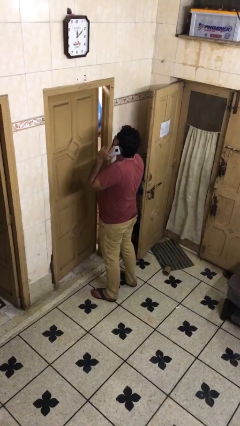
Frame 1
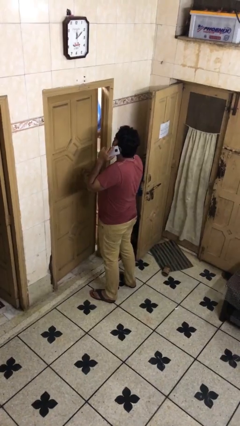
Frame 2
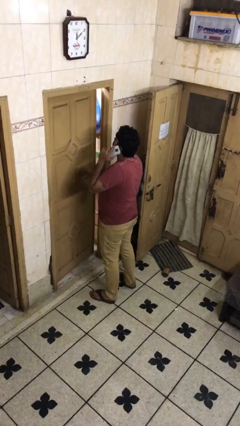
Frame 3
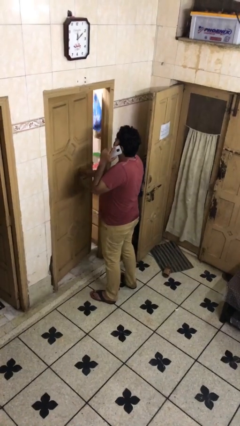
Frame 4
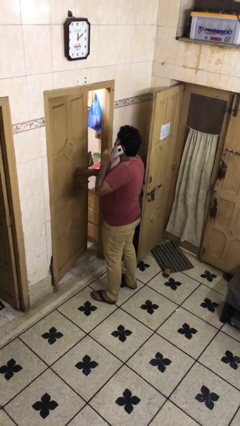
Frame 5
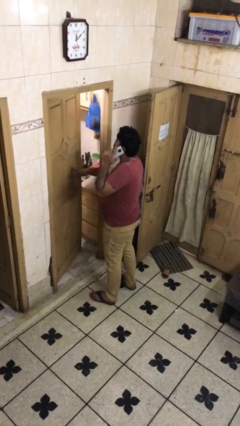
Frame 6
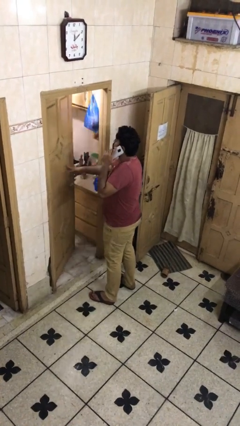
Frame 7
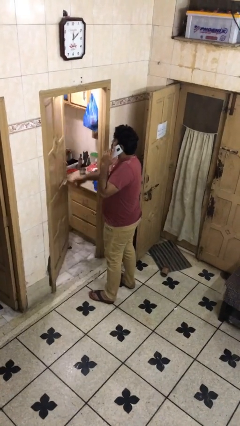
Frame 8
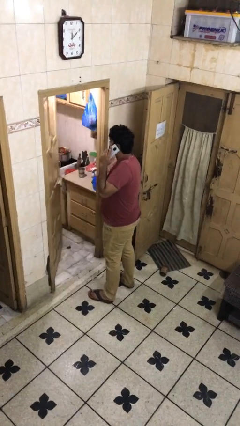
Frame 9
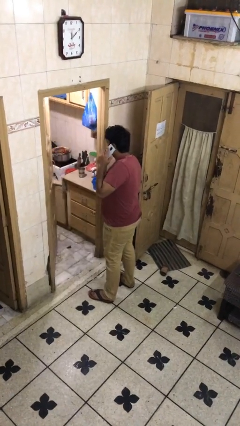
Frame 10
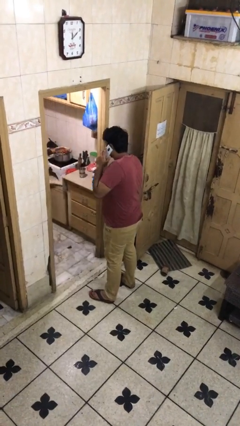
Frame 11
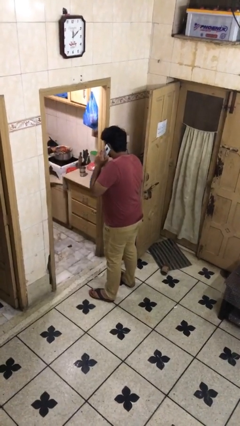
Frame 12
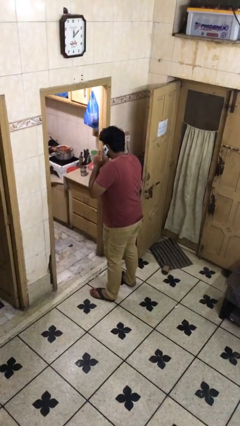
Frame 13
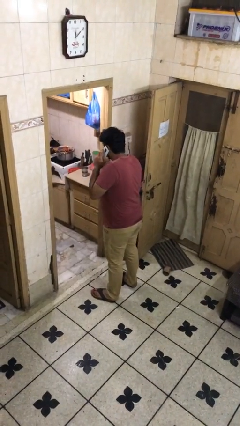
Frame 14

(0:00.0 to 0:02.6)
person opens facility door

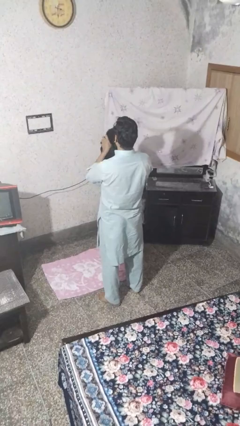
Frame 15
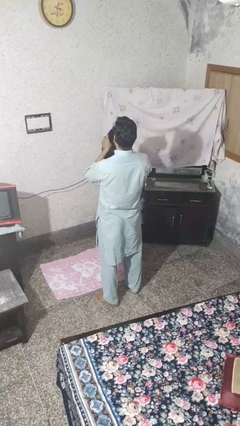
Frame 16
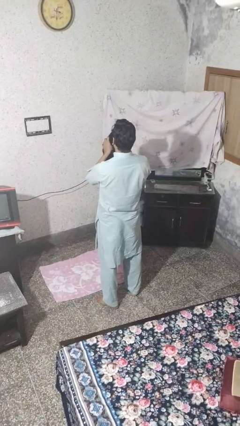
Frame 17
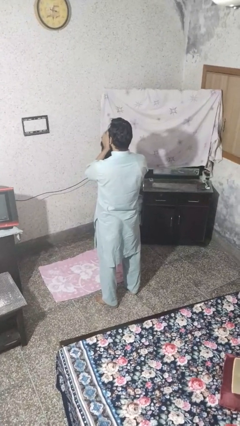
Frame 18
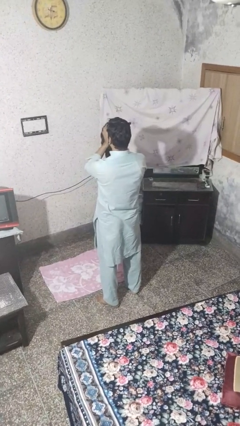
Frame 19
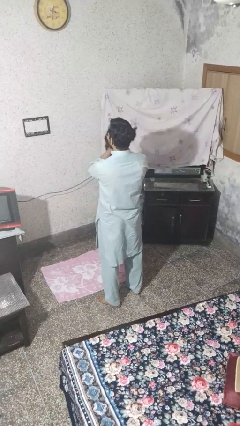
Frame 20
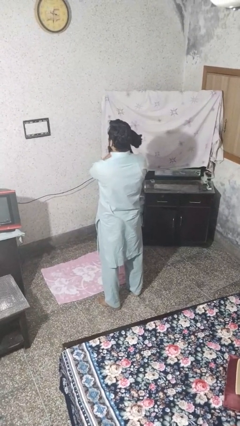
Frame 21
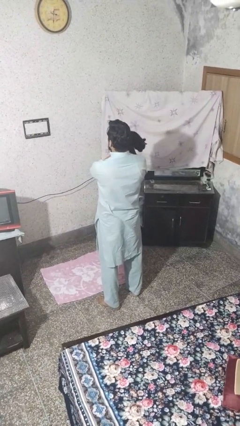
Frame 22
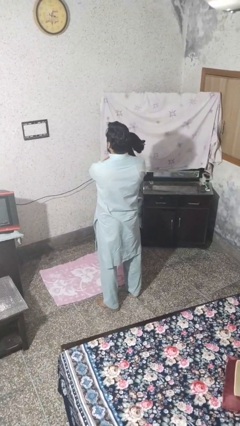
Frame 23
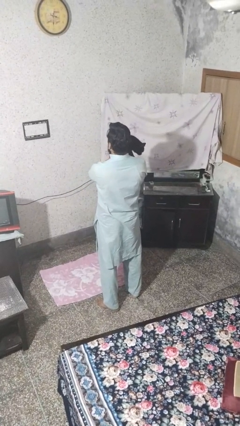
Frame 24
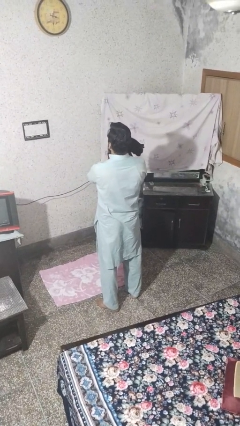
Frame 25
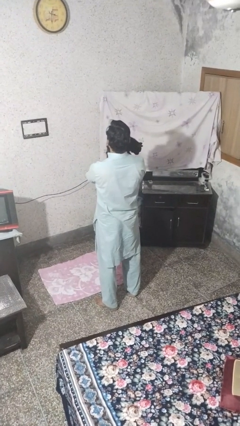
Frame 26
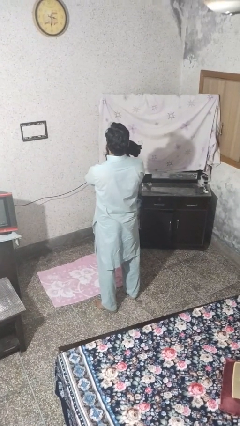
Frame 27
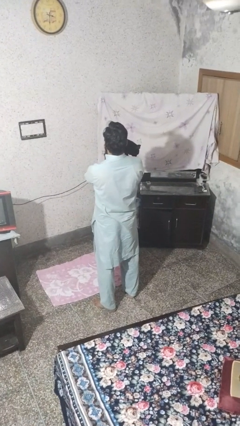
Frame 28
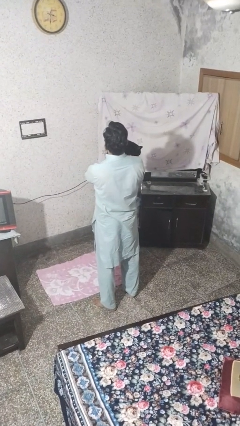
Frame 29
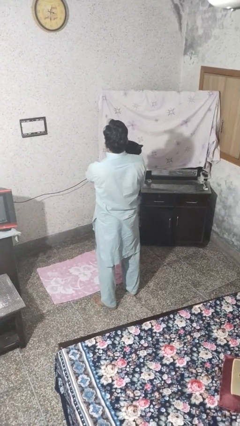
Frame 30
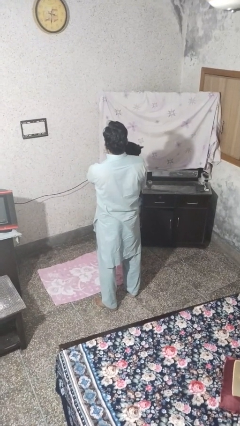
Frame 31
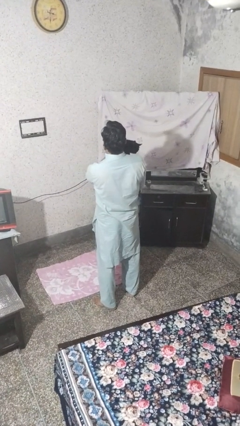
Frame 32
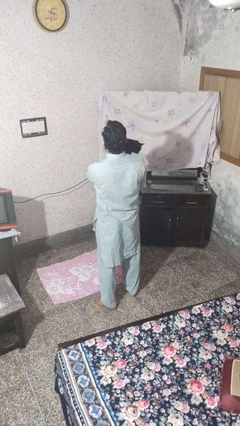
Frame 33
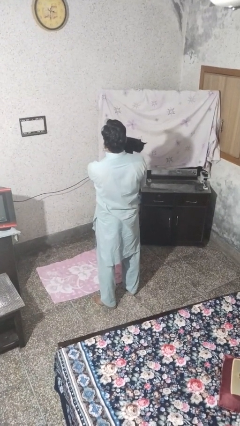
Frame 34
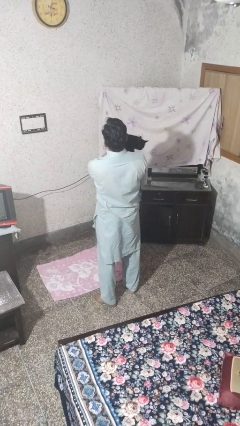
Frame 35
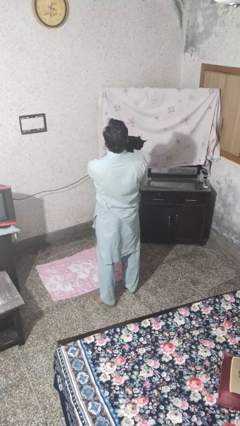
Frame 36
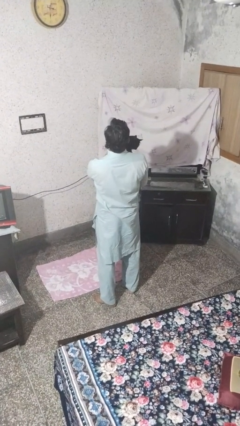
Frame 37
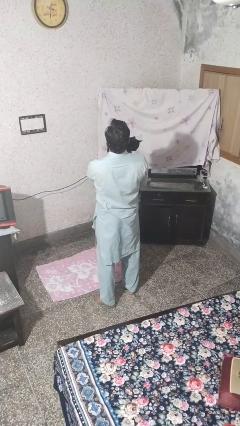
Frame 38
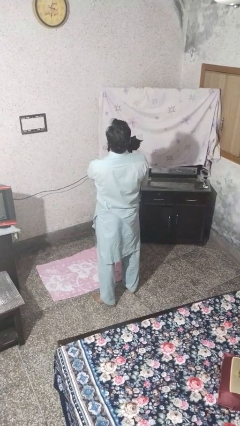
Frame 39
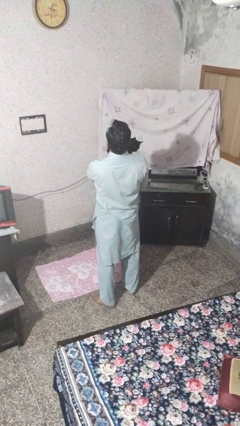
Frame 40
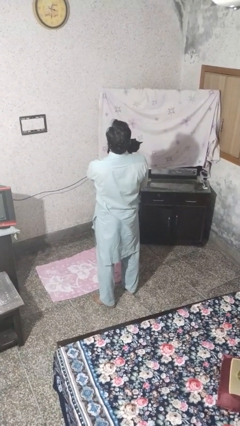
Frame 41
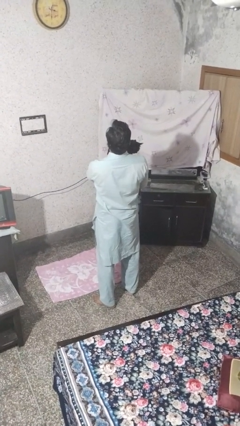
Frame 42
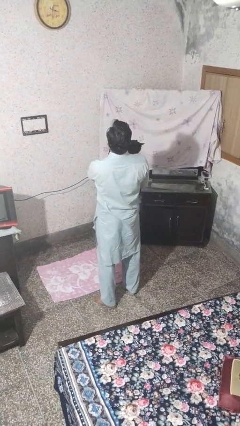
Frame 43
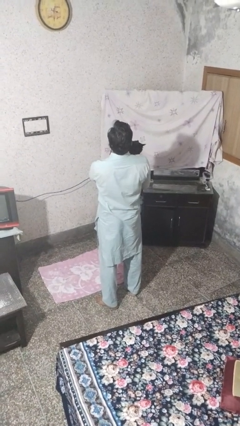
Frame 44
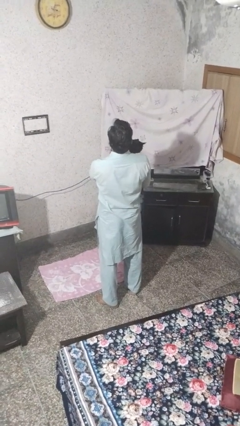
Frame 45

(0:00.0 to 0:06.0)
person hugs cat

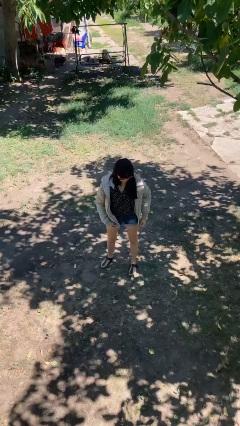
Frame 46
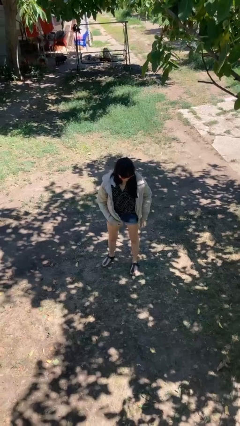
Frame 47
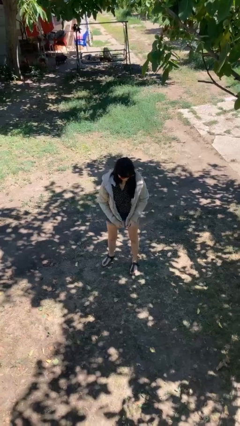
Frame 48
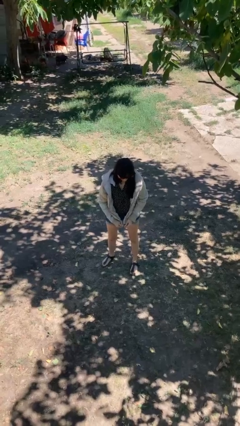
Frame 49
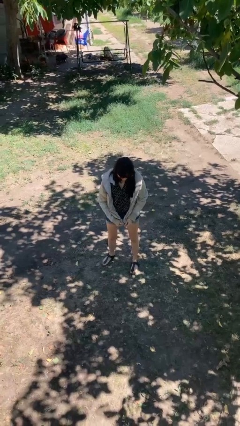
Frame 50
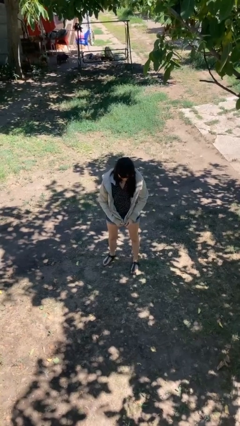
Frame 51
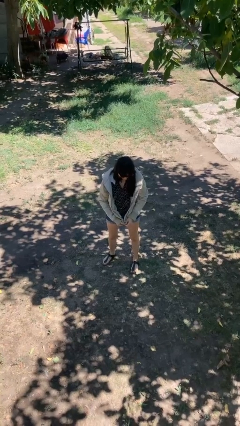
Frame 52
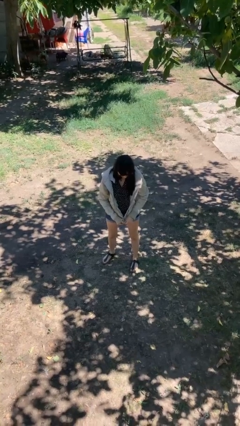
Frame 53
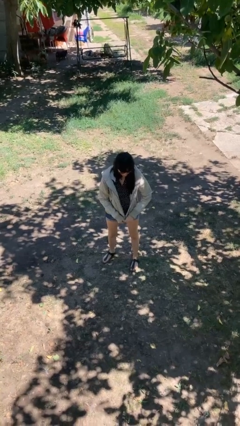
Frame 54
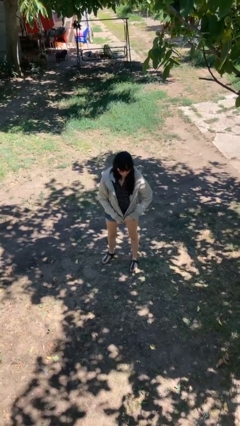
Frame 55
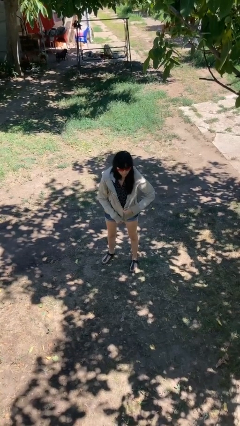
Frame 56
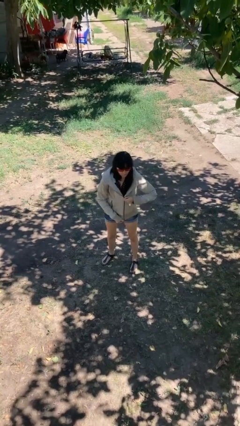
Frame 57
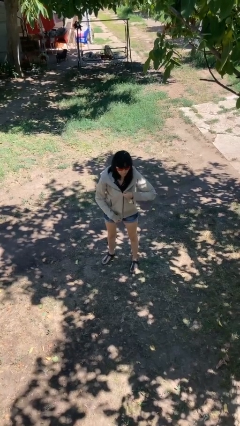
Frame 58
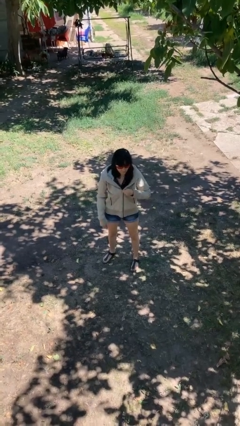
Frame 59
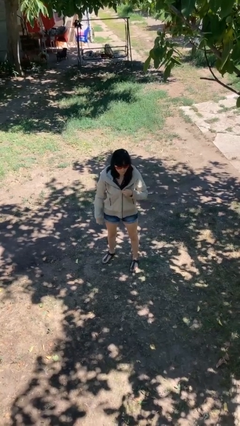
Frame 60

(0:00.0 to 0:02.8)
person zips up jacket

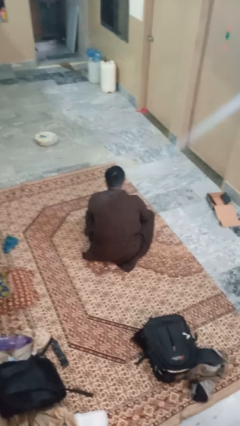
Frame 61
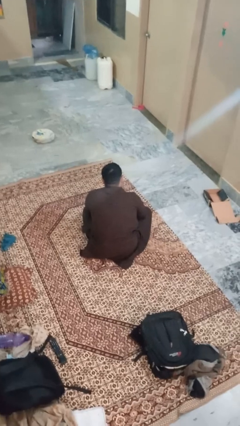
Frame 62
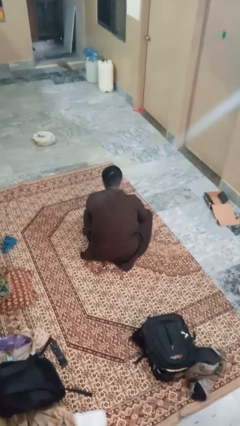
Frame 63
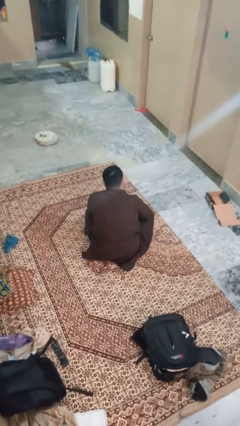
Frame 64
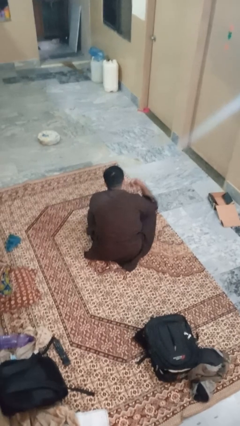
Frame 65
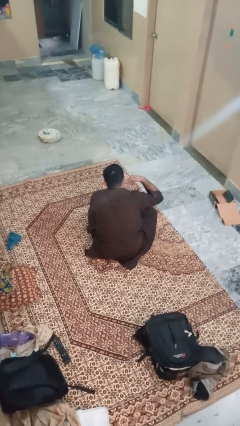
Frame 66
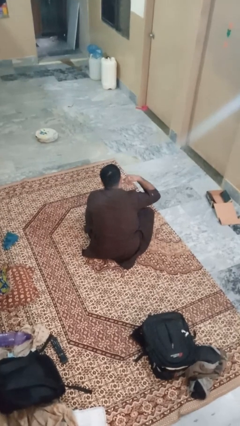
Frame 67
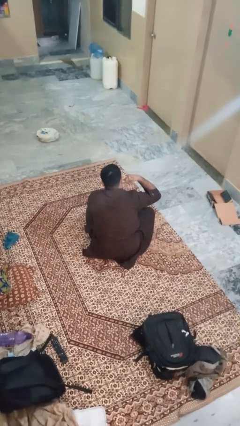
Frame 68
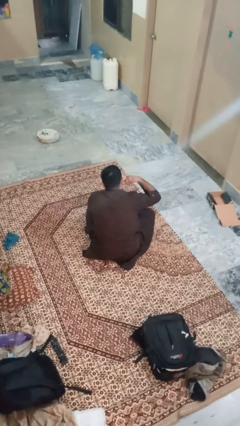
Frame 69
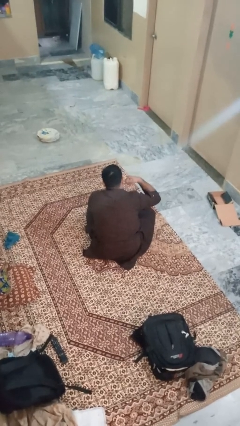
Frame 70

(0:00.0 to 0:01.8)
person gestures call me

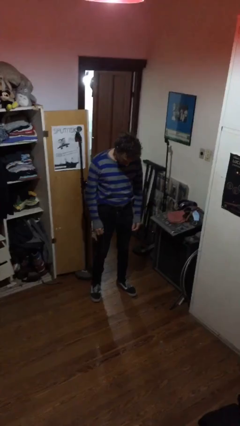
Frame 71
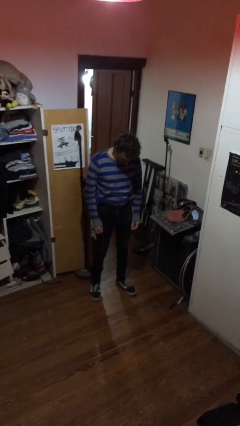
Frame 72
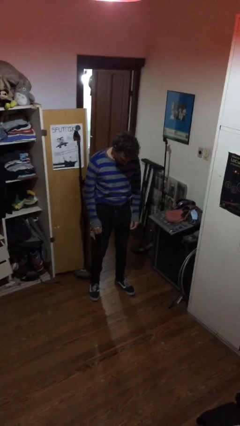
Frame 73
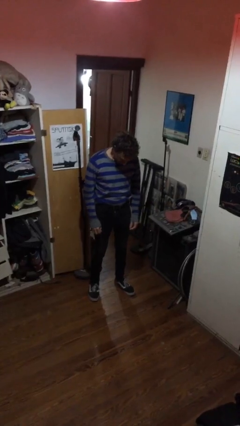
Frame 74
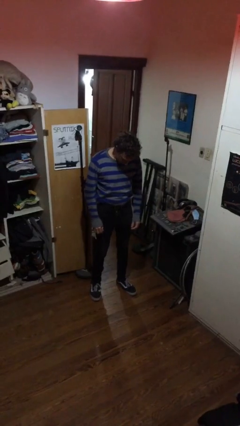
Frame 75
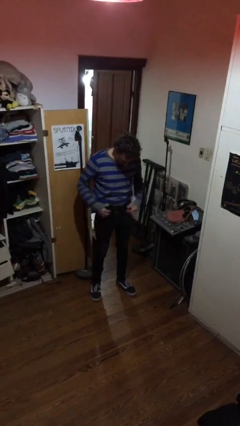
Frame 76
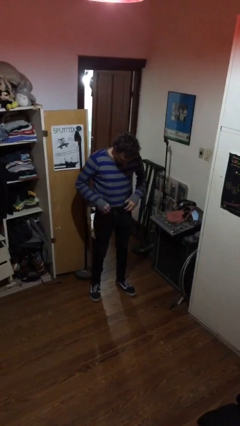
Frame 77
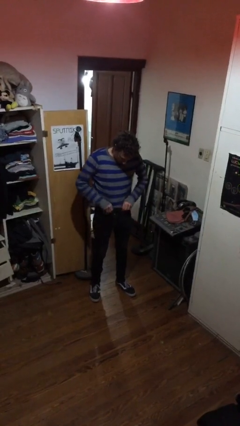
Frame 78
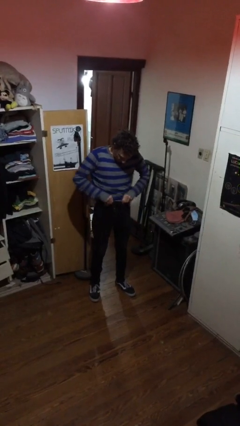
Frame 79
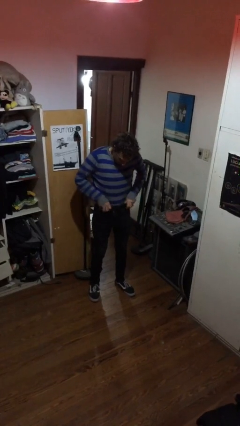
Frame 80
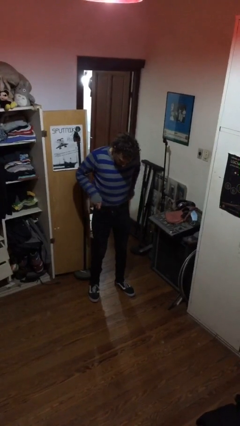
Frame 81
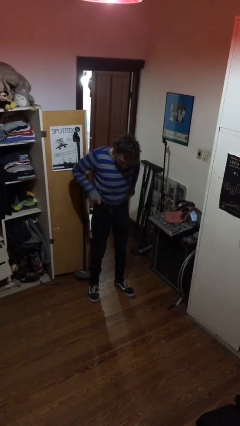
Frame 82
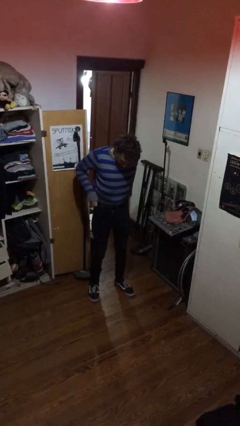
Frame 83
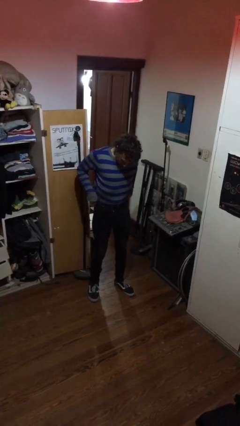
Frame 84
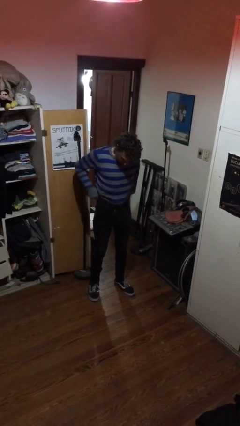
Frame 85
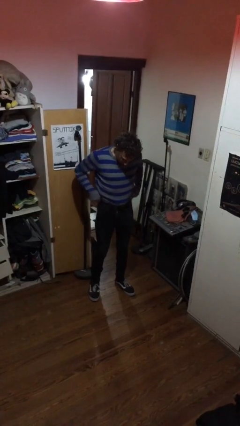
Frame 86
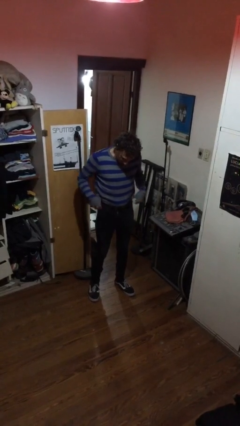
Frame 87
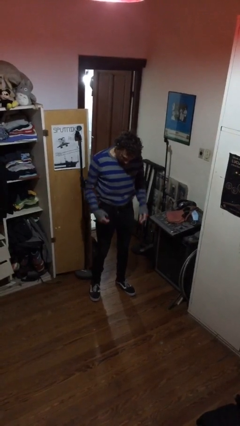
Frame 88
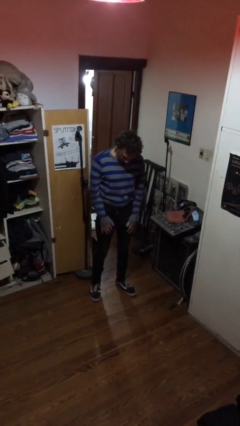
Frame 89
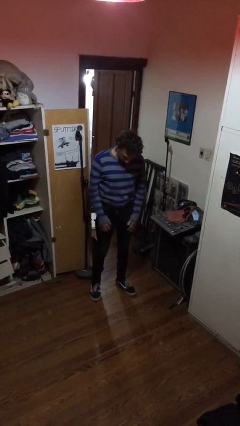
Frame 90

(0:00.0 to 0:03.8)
person hikes up pants

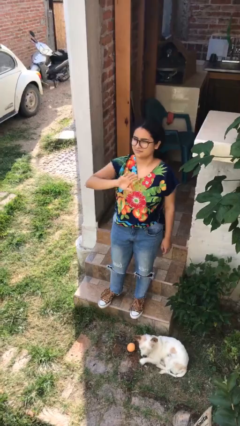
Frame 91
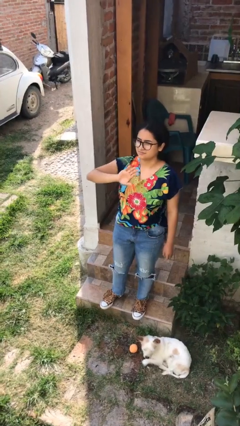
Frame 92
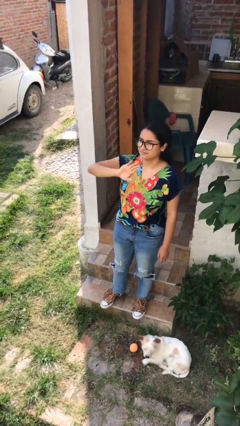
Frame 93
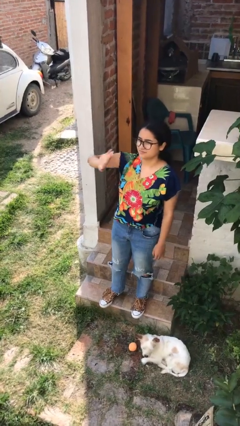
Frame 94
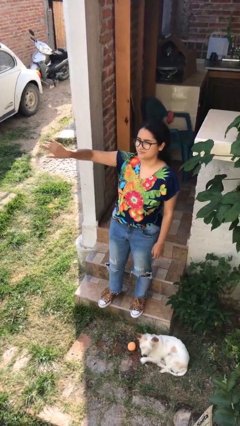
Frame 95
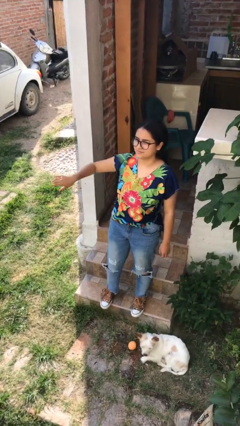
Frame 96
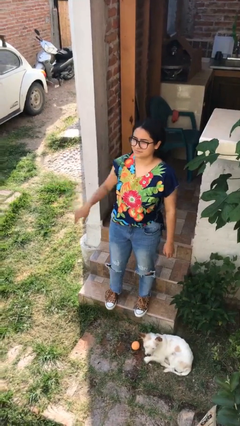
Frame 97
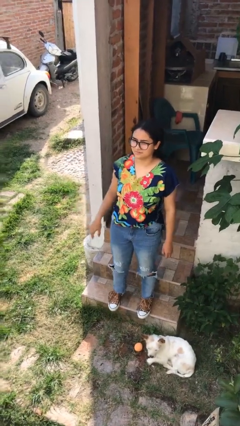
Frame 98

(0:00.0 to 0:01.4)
person gestures swipe right
